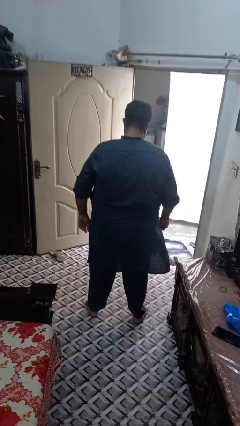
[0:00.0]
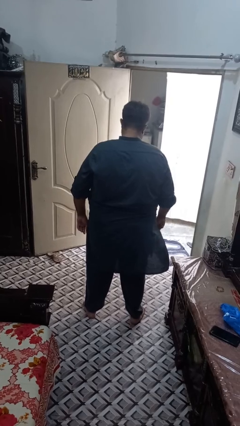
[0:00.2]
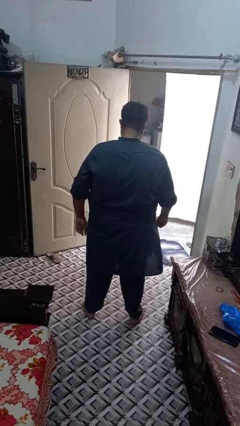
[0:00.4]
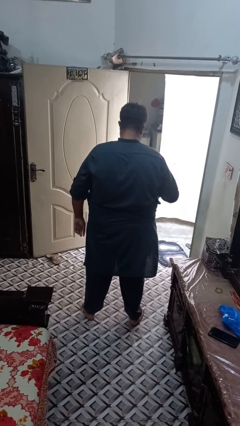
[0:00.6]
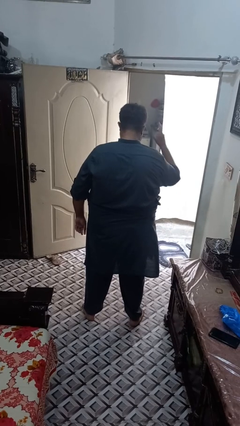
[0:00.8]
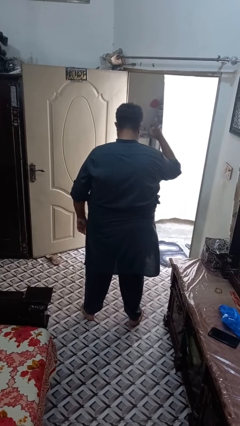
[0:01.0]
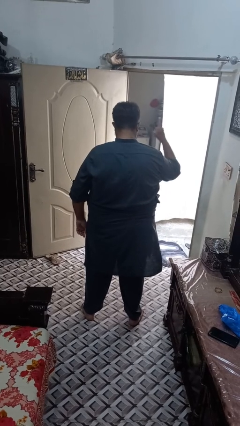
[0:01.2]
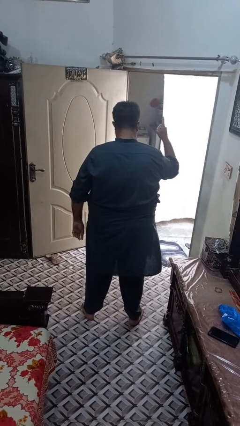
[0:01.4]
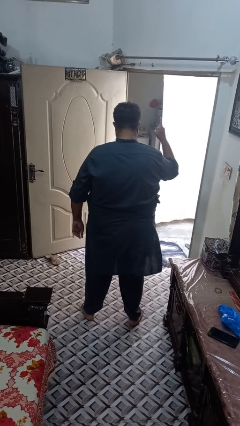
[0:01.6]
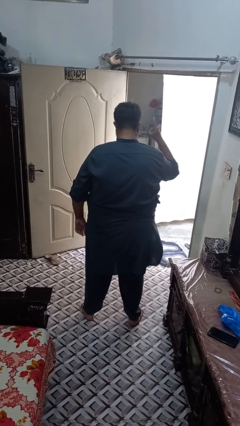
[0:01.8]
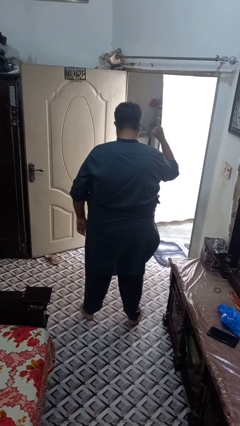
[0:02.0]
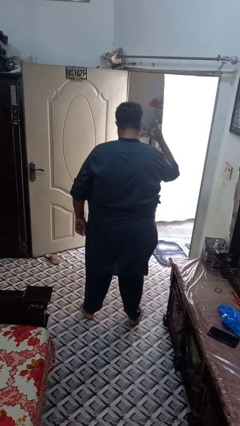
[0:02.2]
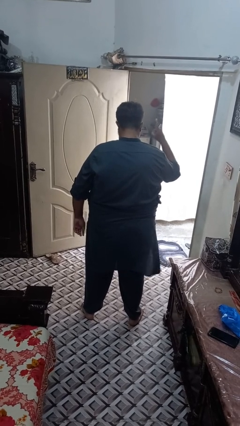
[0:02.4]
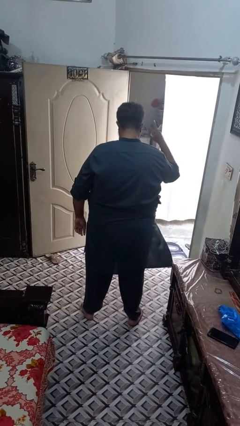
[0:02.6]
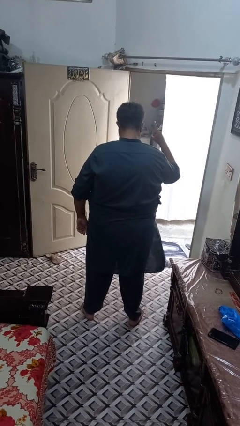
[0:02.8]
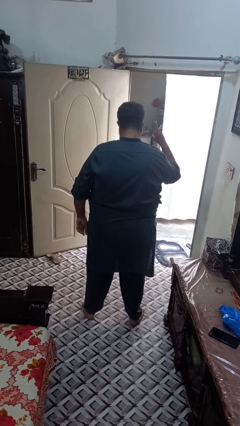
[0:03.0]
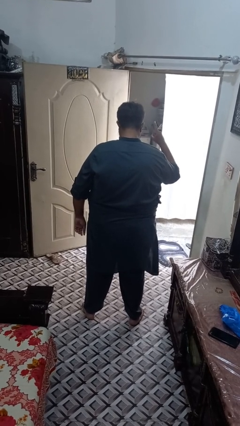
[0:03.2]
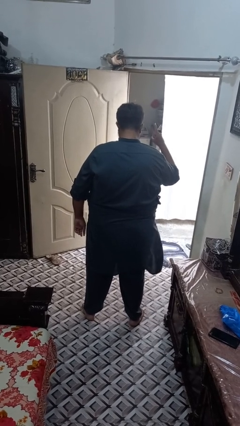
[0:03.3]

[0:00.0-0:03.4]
person gestures number one

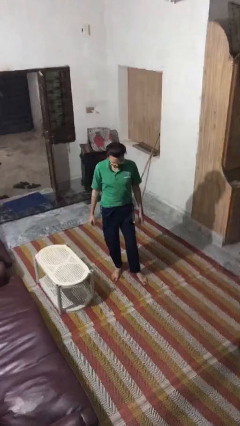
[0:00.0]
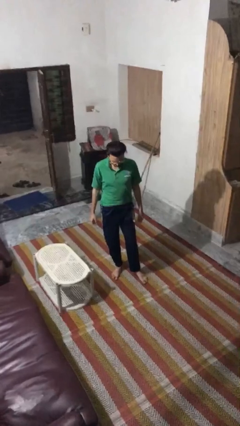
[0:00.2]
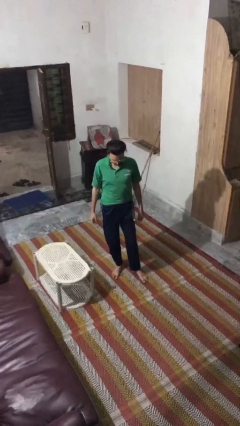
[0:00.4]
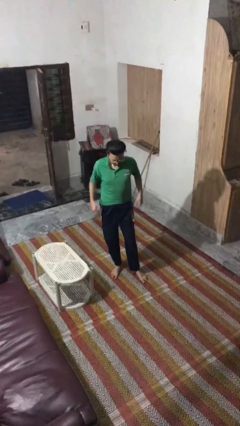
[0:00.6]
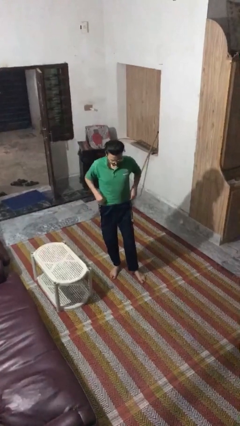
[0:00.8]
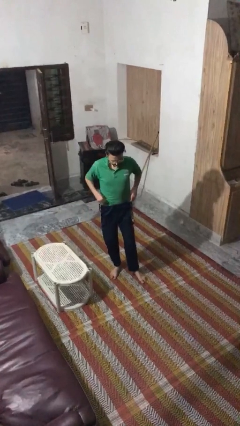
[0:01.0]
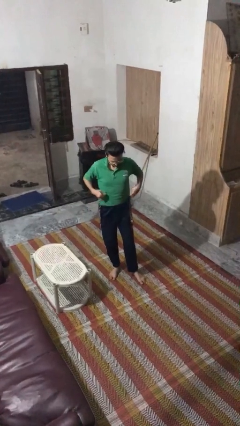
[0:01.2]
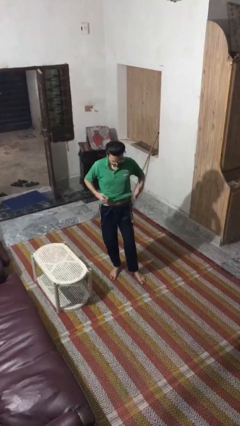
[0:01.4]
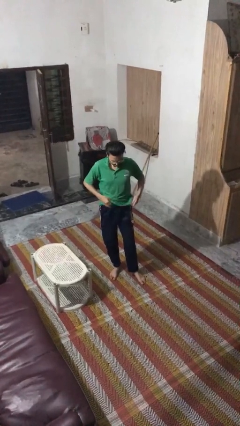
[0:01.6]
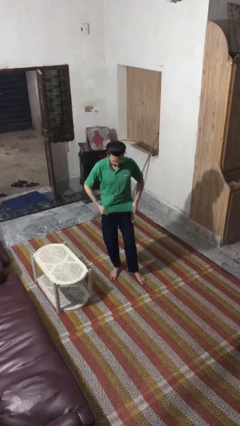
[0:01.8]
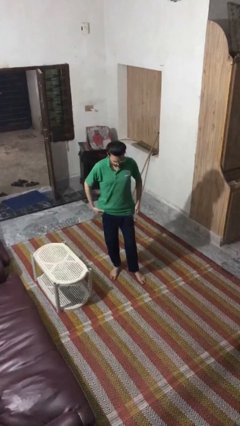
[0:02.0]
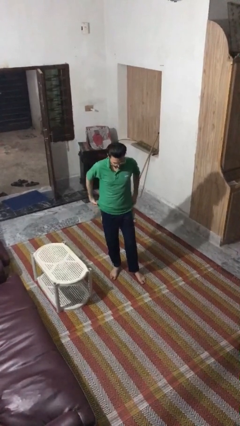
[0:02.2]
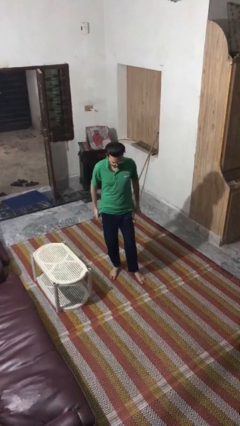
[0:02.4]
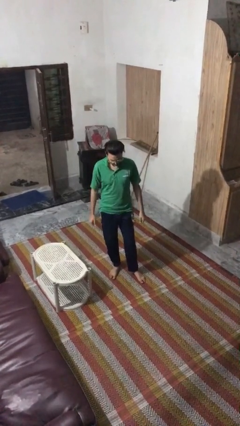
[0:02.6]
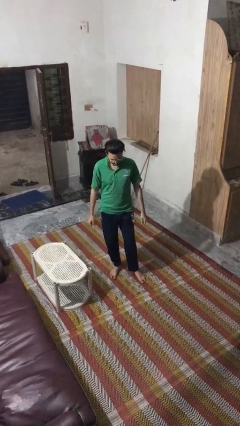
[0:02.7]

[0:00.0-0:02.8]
person untucks shirt

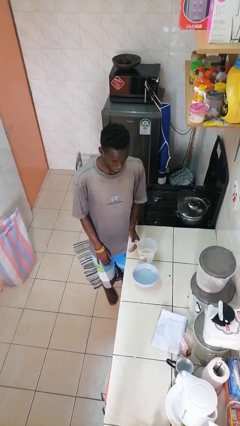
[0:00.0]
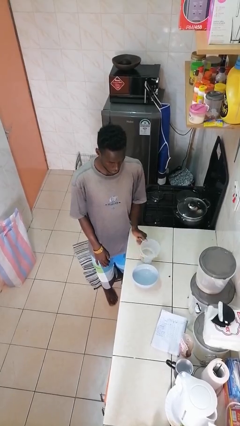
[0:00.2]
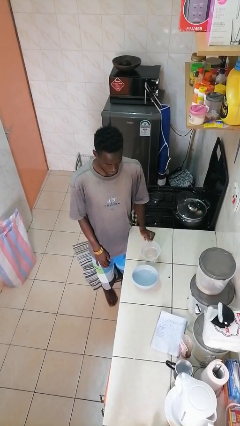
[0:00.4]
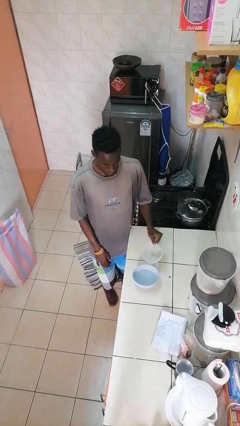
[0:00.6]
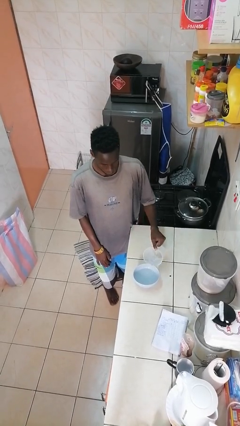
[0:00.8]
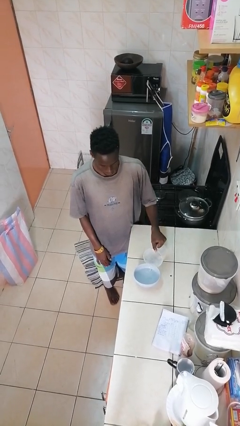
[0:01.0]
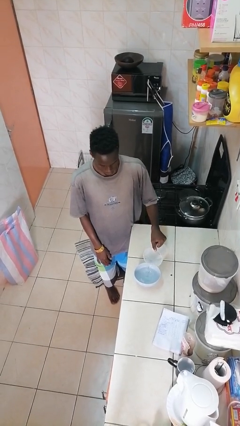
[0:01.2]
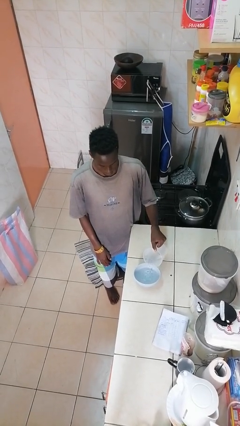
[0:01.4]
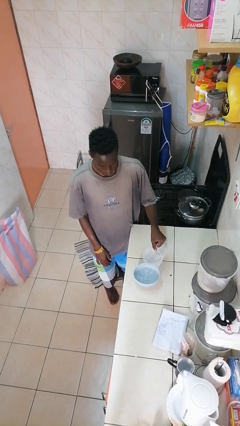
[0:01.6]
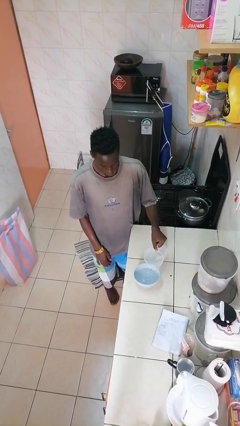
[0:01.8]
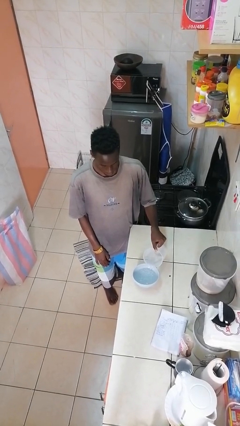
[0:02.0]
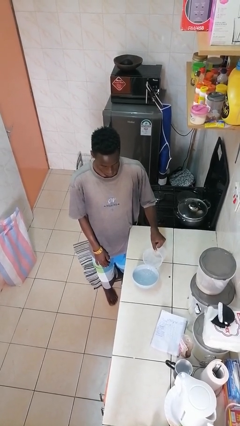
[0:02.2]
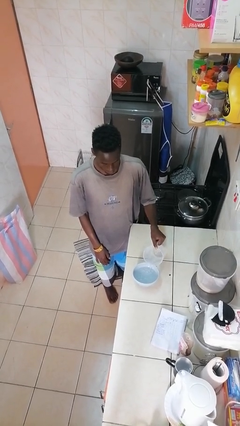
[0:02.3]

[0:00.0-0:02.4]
person pours into bowl

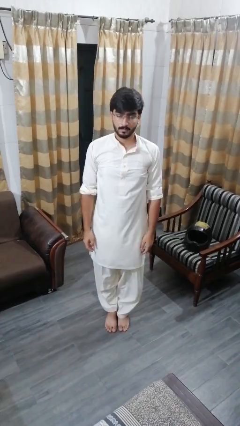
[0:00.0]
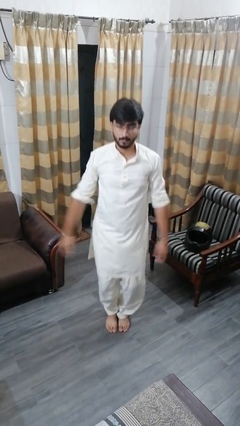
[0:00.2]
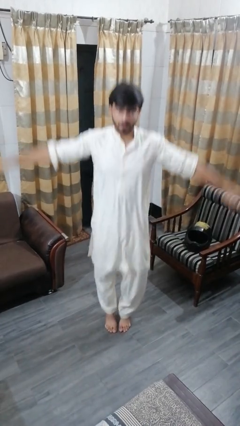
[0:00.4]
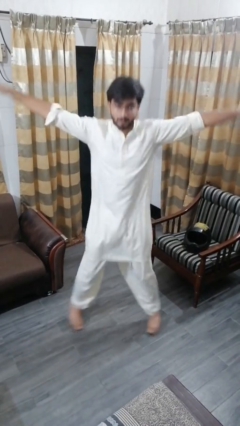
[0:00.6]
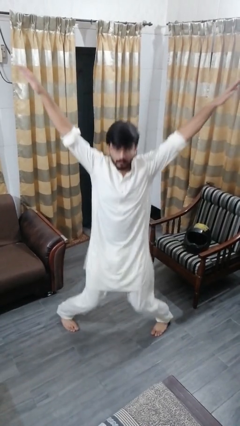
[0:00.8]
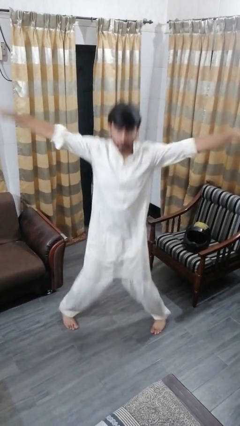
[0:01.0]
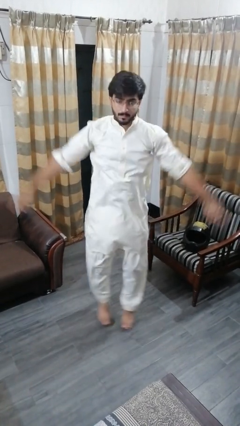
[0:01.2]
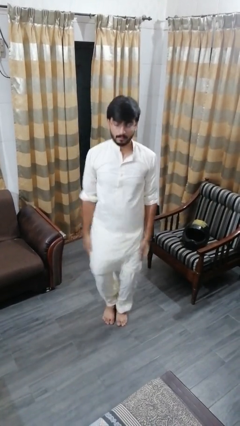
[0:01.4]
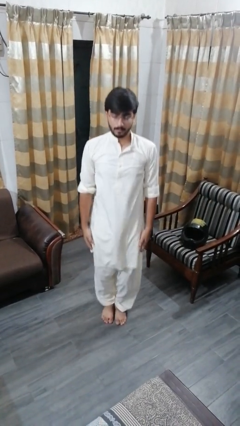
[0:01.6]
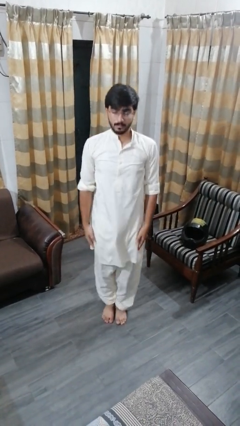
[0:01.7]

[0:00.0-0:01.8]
person exercises with jumping jacks

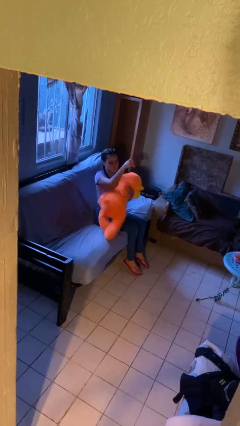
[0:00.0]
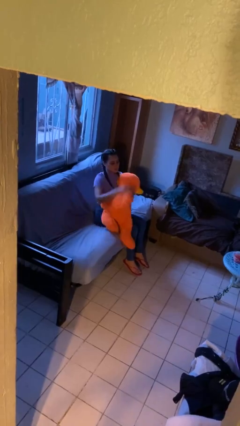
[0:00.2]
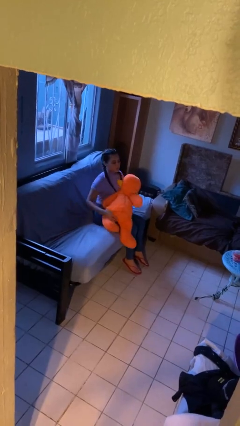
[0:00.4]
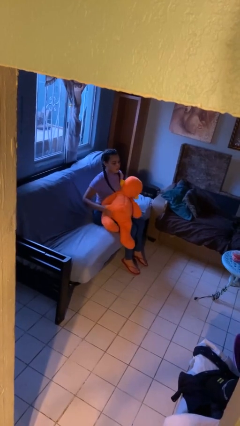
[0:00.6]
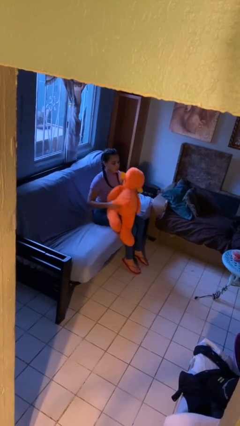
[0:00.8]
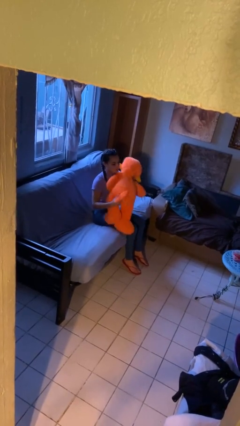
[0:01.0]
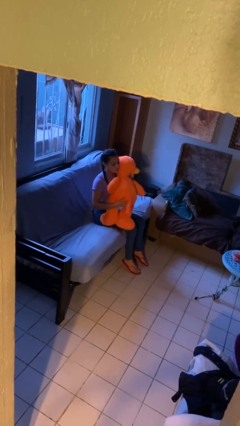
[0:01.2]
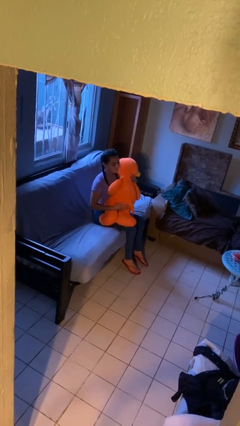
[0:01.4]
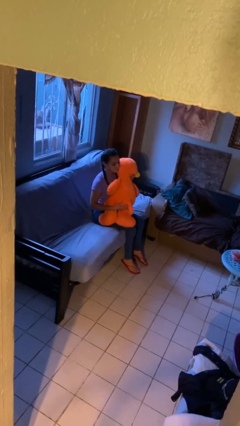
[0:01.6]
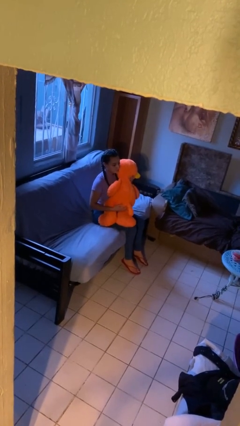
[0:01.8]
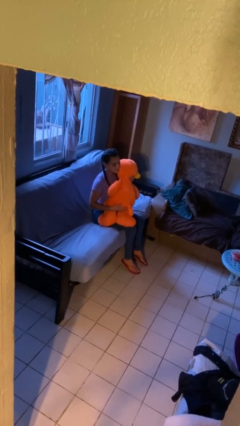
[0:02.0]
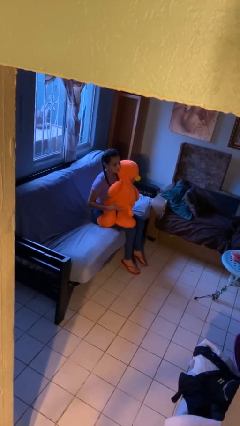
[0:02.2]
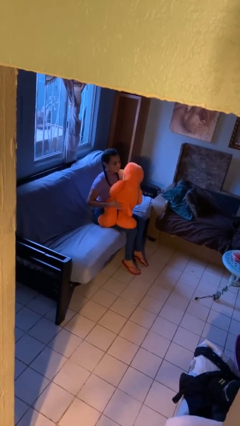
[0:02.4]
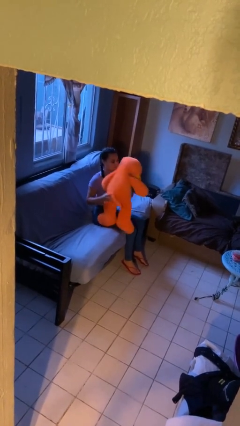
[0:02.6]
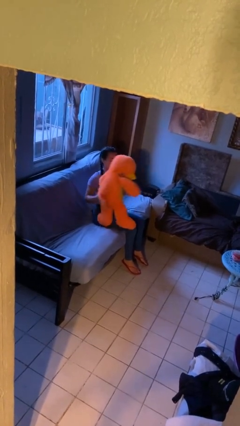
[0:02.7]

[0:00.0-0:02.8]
person hugs stuffed animal

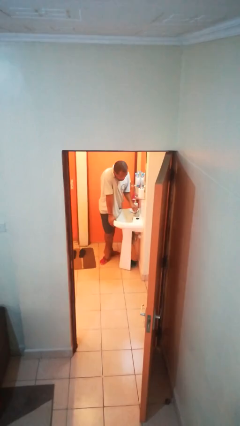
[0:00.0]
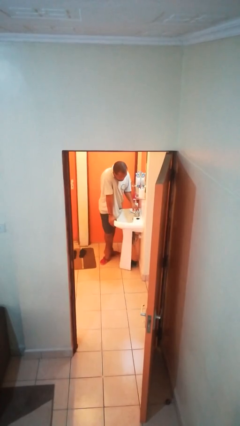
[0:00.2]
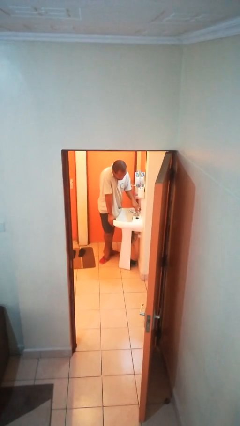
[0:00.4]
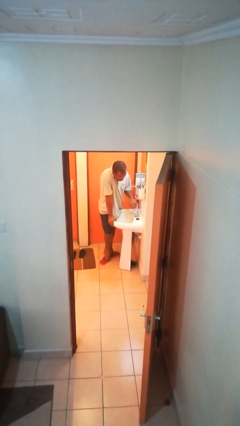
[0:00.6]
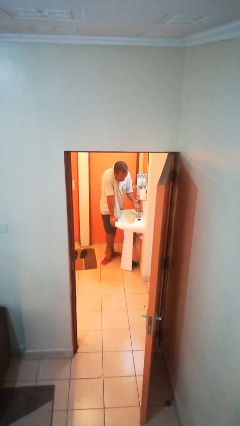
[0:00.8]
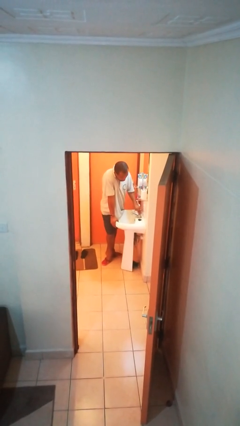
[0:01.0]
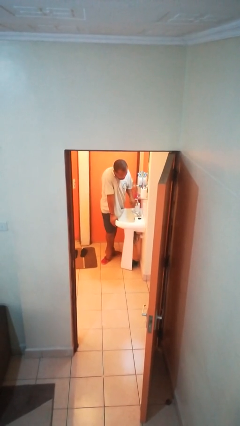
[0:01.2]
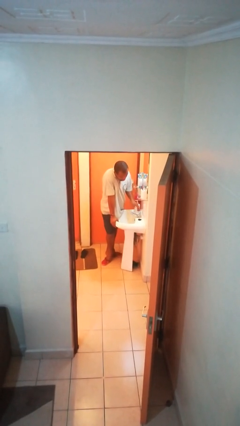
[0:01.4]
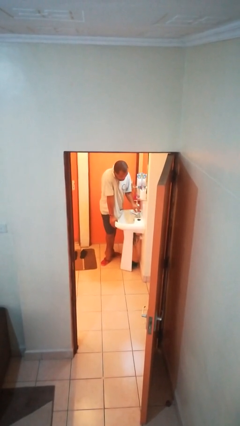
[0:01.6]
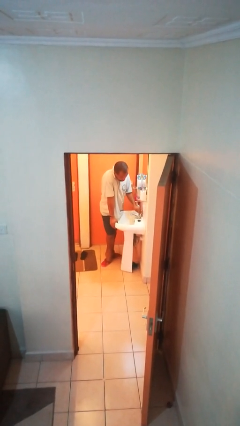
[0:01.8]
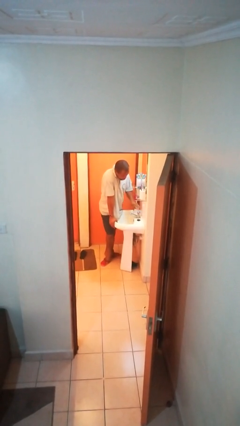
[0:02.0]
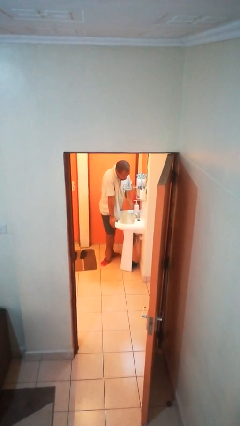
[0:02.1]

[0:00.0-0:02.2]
person turns off faucet

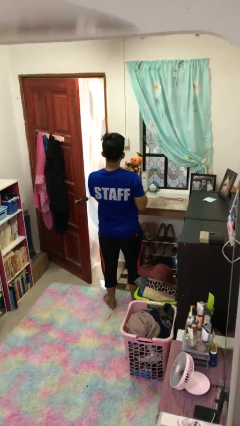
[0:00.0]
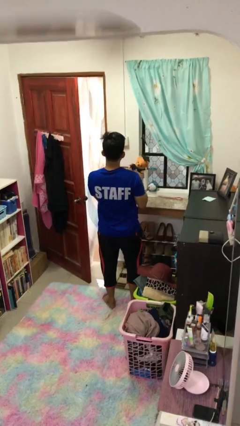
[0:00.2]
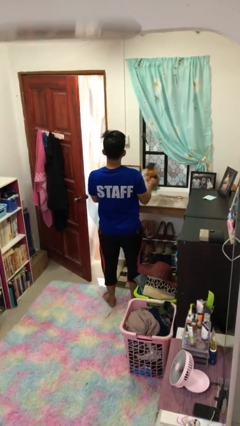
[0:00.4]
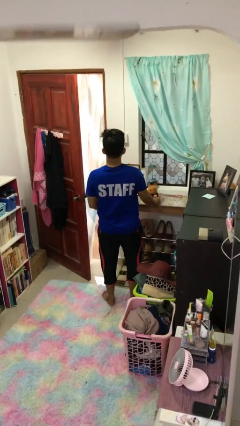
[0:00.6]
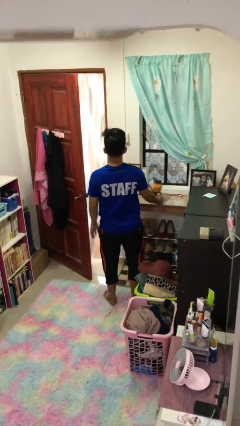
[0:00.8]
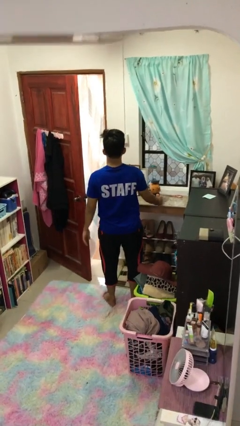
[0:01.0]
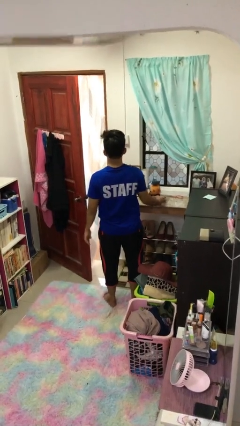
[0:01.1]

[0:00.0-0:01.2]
person puts down object on countertop

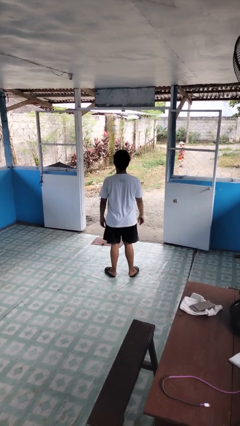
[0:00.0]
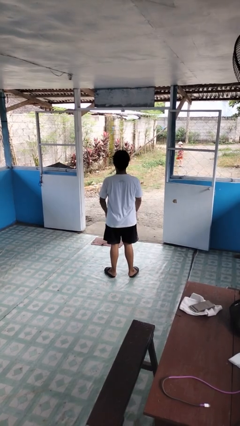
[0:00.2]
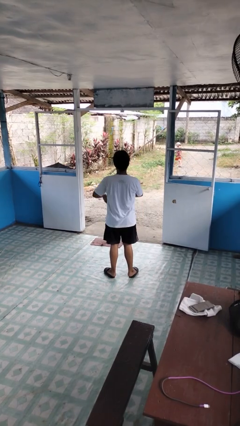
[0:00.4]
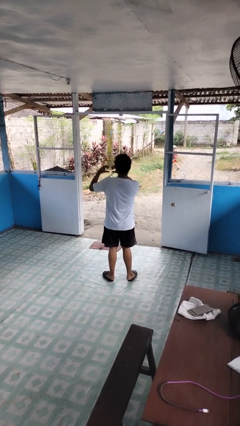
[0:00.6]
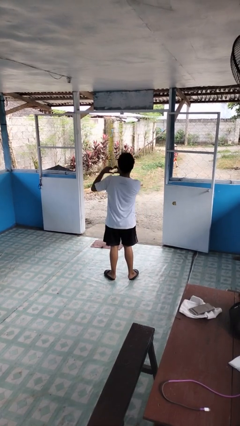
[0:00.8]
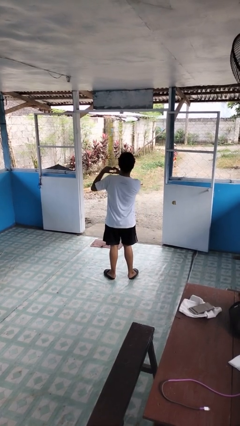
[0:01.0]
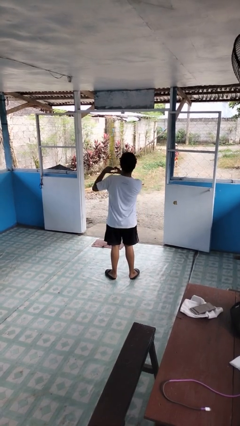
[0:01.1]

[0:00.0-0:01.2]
person gestures heart
